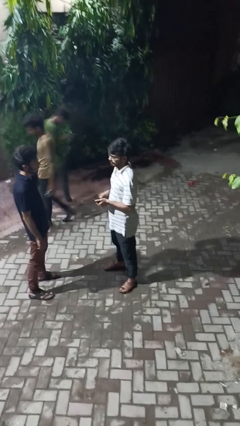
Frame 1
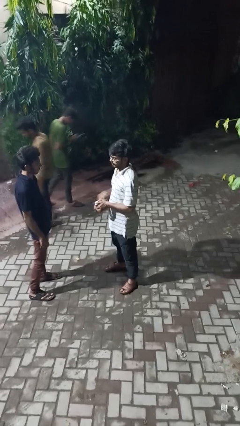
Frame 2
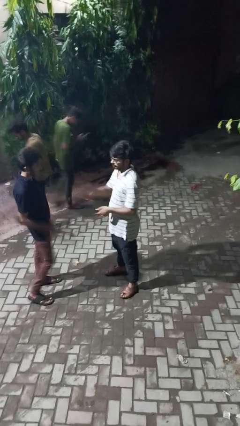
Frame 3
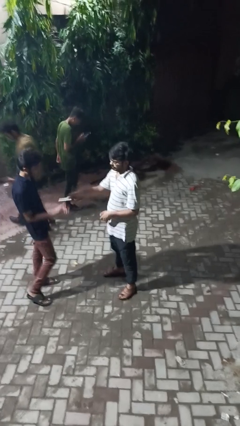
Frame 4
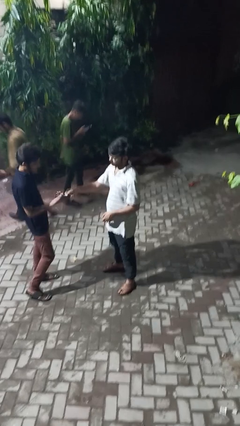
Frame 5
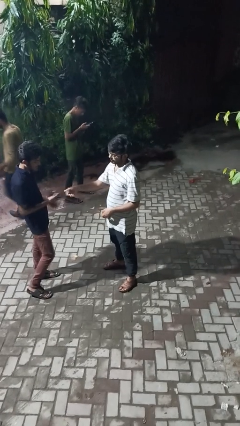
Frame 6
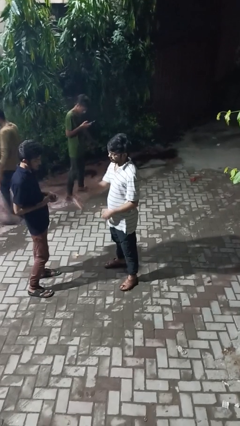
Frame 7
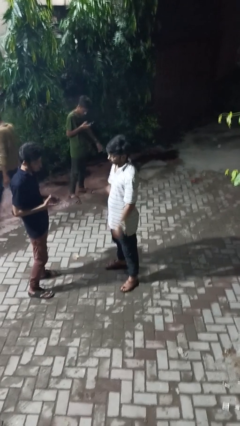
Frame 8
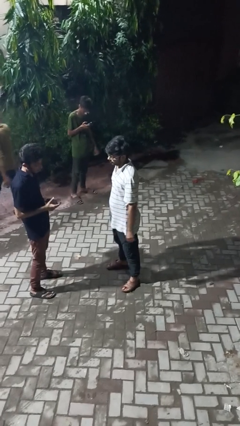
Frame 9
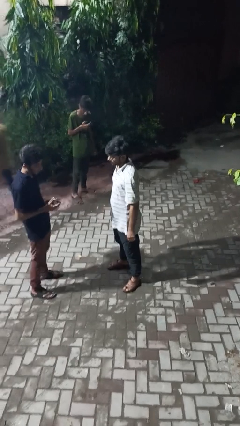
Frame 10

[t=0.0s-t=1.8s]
person transfers object to person

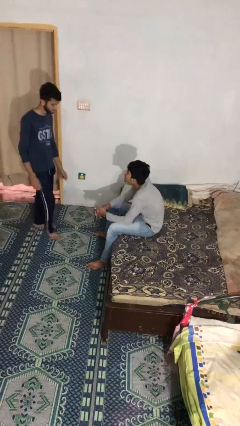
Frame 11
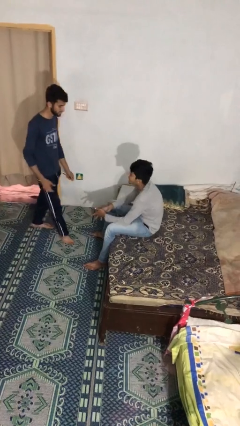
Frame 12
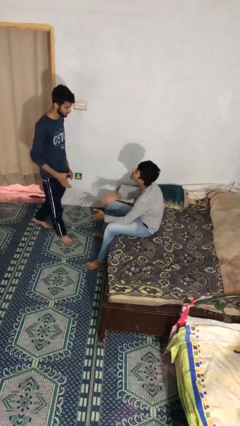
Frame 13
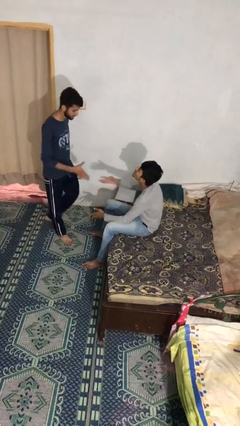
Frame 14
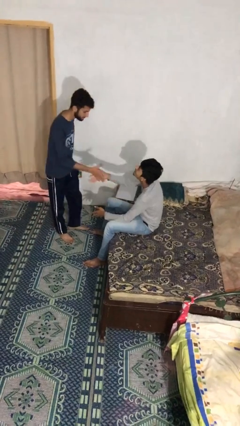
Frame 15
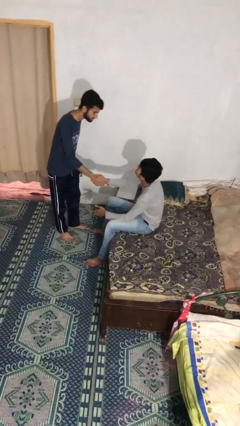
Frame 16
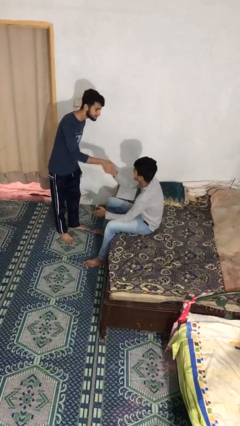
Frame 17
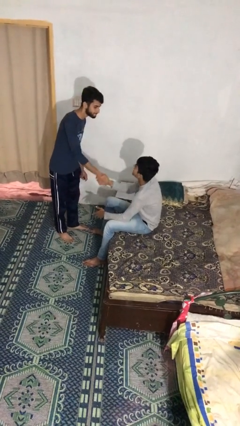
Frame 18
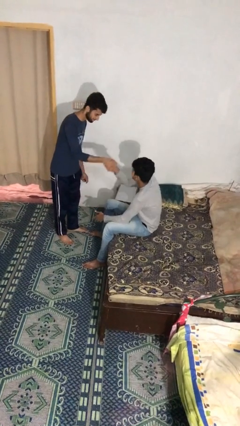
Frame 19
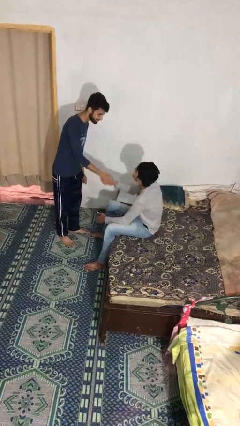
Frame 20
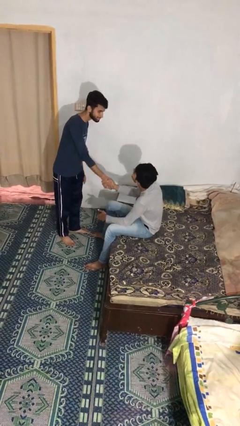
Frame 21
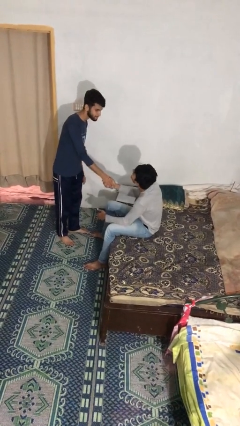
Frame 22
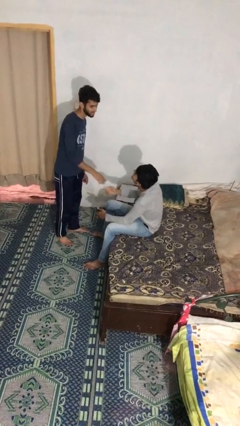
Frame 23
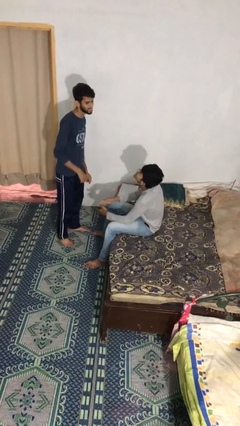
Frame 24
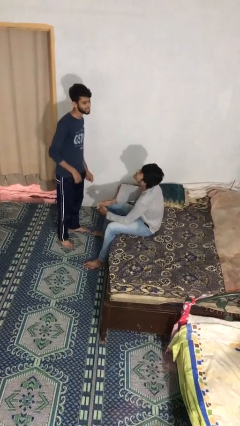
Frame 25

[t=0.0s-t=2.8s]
person shakes hand

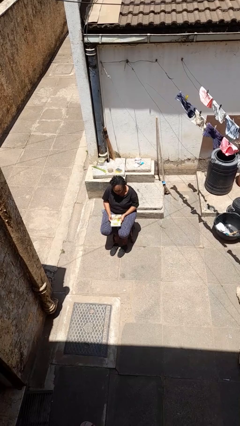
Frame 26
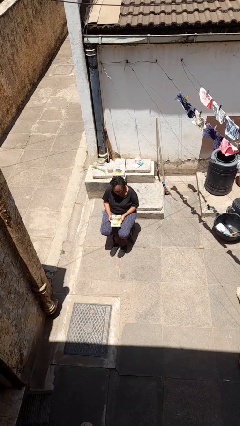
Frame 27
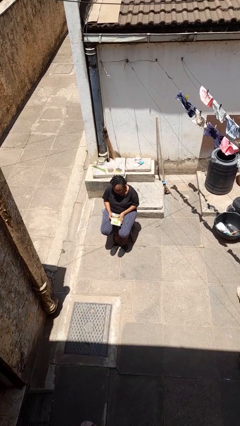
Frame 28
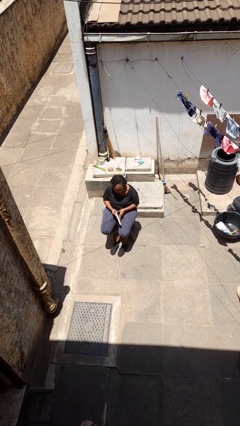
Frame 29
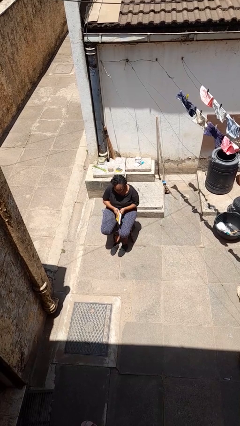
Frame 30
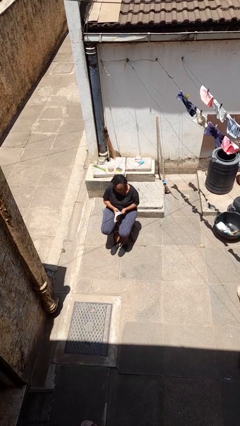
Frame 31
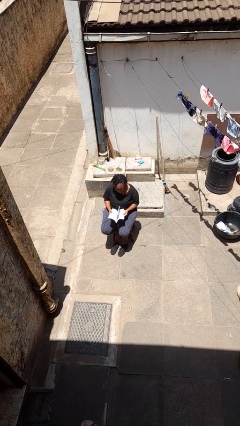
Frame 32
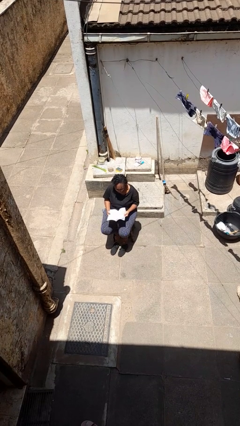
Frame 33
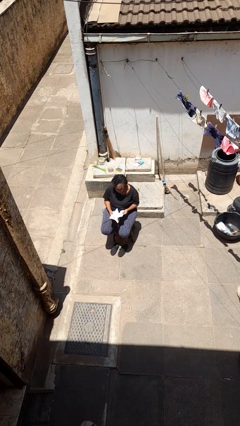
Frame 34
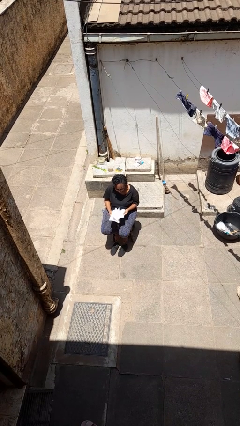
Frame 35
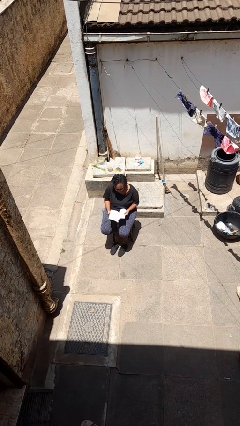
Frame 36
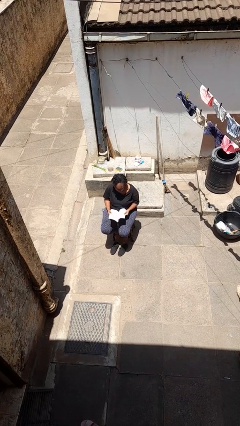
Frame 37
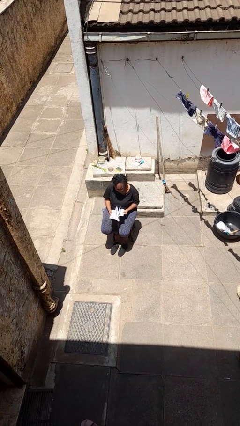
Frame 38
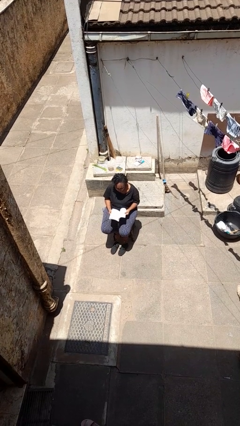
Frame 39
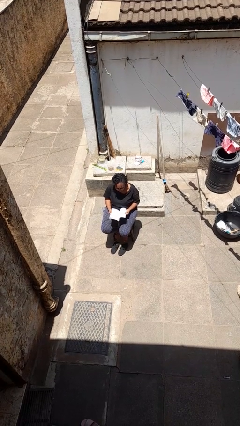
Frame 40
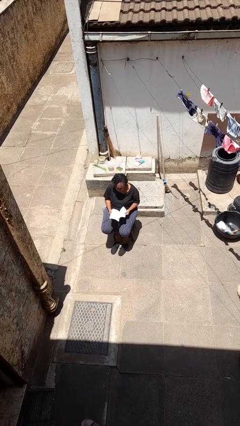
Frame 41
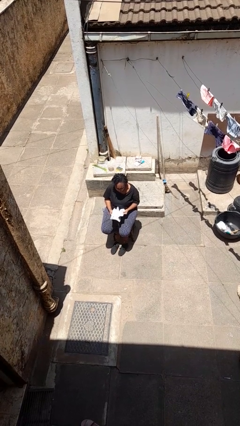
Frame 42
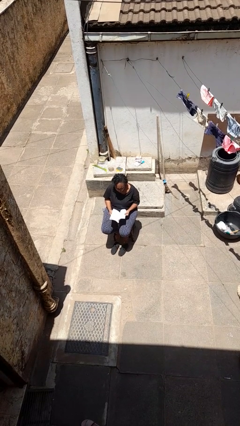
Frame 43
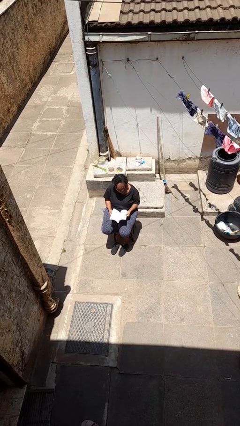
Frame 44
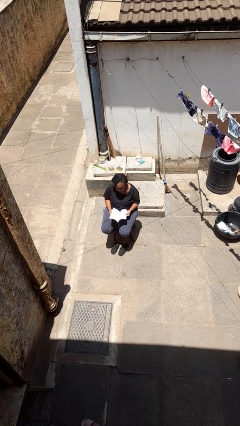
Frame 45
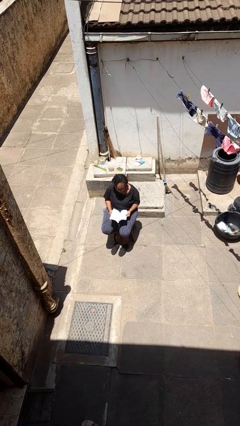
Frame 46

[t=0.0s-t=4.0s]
person reads book

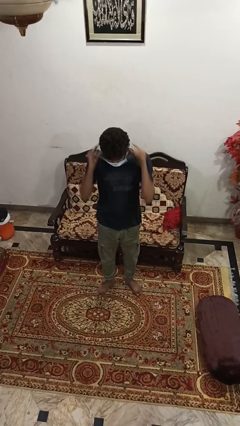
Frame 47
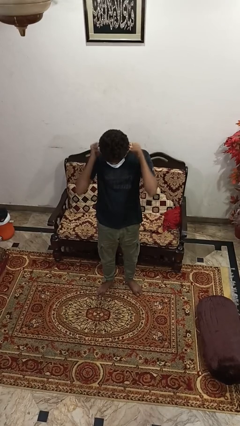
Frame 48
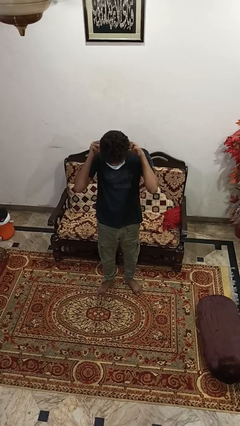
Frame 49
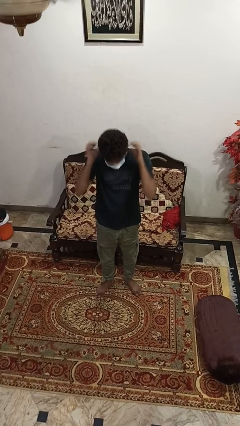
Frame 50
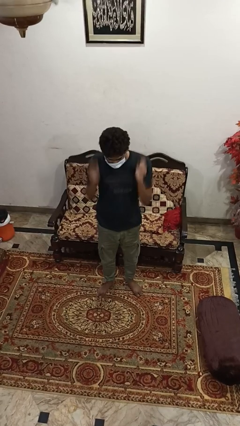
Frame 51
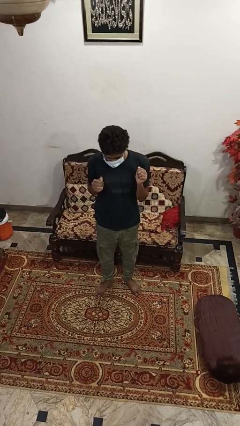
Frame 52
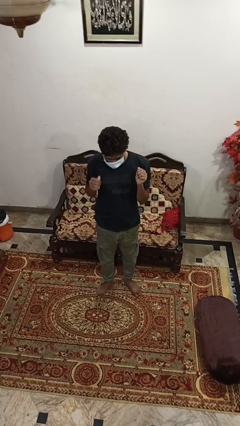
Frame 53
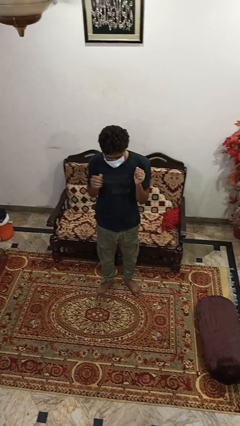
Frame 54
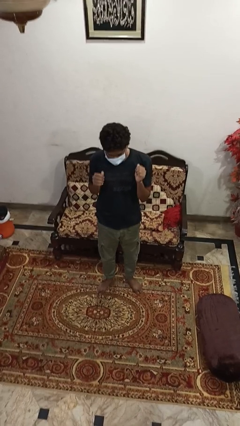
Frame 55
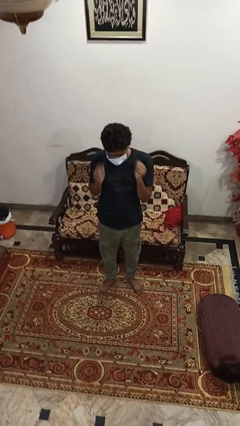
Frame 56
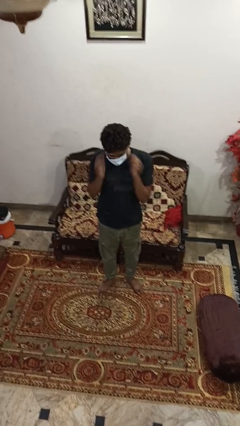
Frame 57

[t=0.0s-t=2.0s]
person puts on facemask

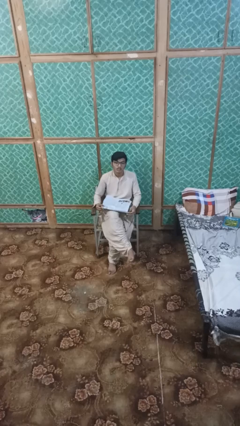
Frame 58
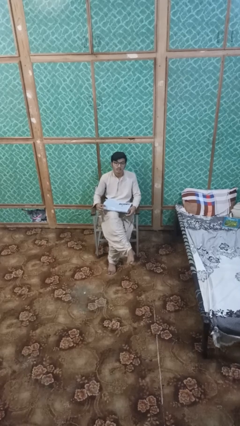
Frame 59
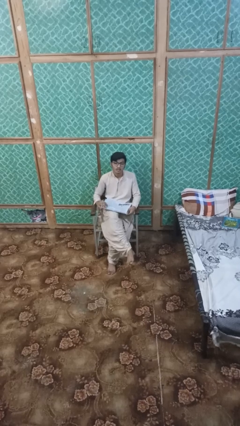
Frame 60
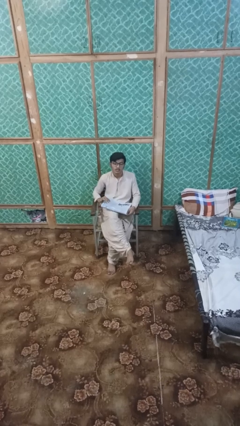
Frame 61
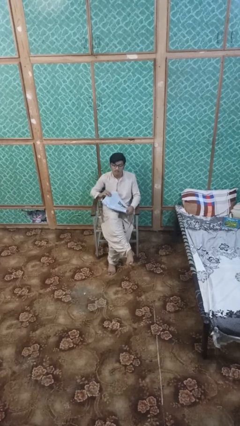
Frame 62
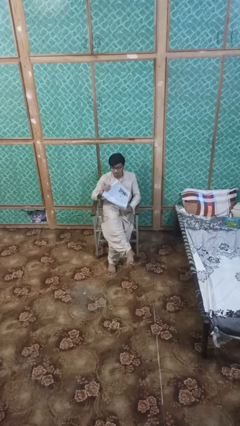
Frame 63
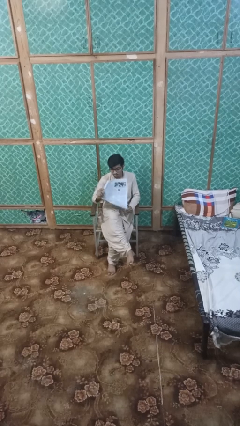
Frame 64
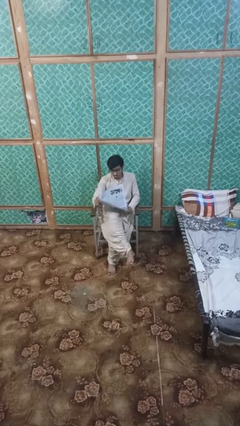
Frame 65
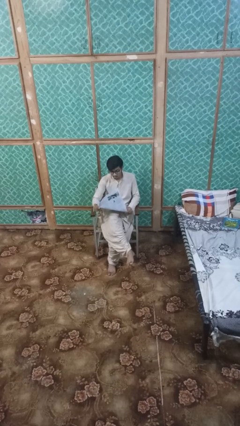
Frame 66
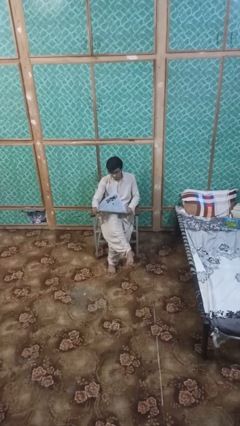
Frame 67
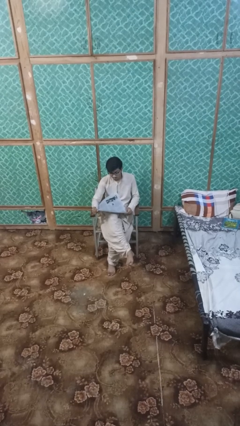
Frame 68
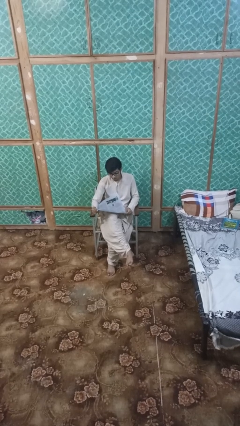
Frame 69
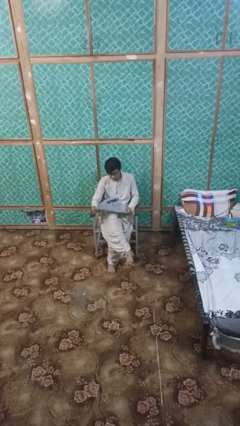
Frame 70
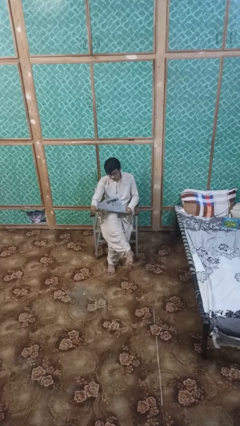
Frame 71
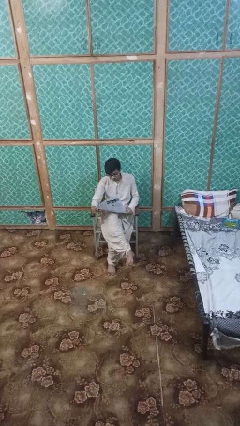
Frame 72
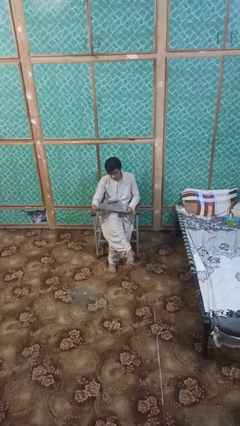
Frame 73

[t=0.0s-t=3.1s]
person reads newspaper

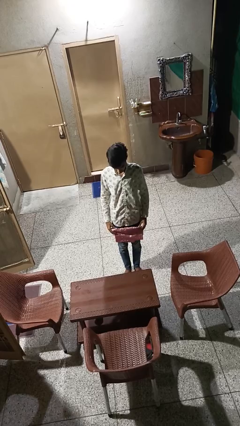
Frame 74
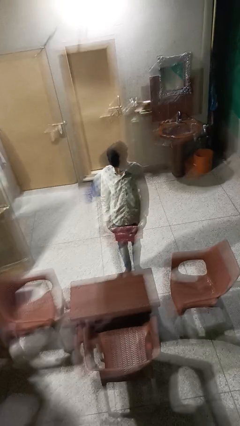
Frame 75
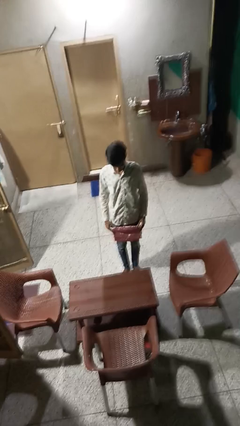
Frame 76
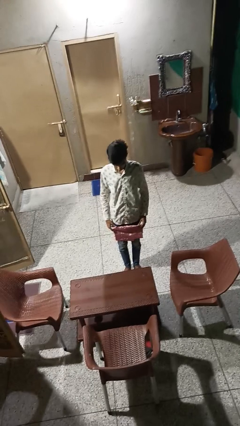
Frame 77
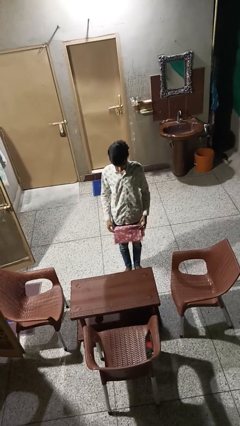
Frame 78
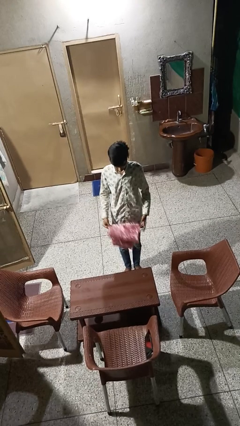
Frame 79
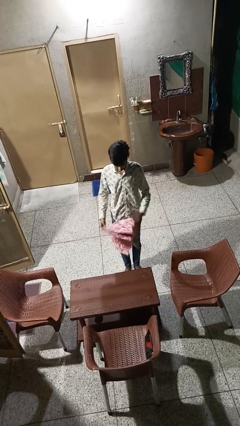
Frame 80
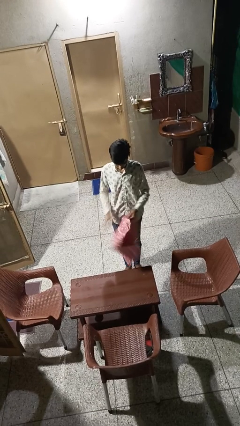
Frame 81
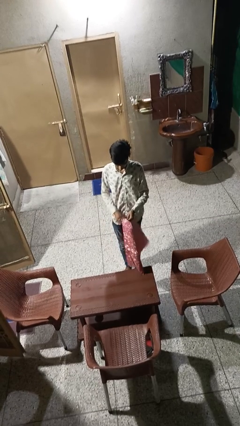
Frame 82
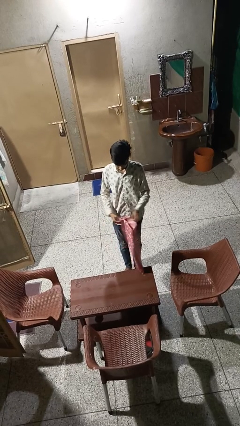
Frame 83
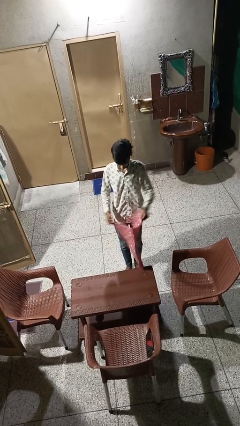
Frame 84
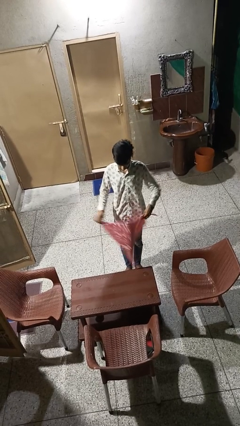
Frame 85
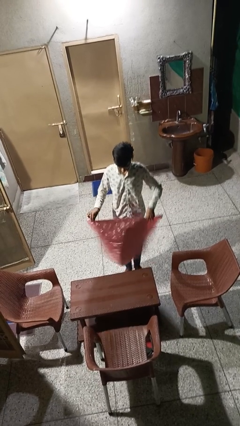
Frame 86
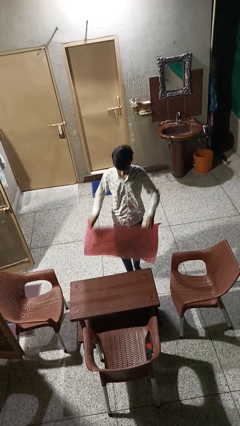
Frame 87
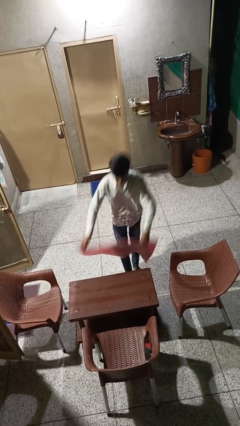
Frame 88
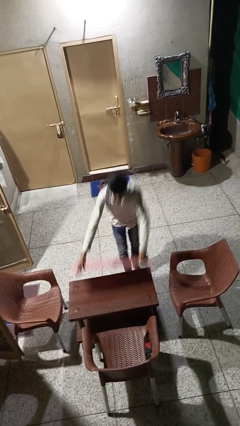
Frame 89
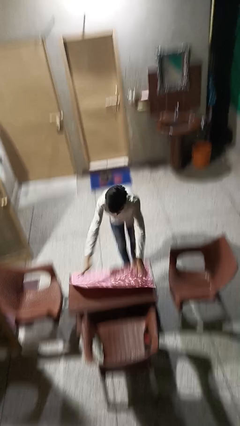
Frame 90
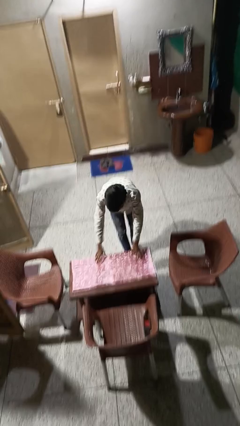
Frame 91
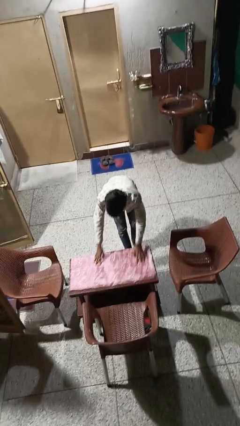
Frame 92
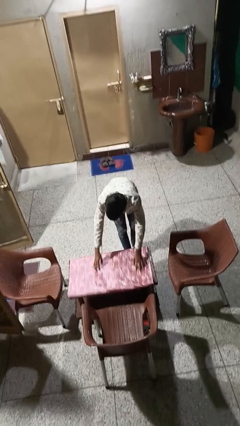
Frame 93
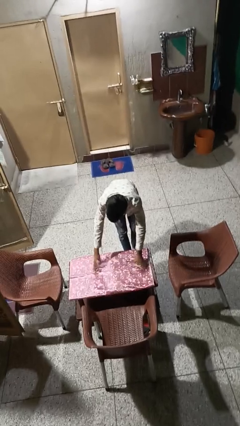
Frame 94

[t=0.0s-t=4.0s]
person spreads tablecloth
